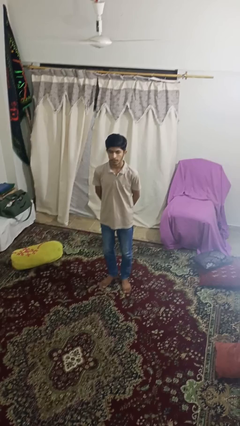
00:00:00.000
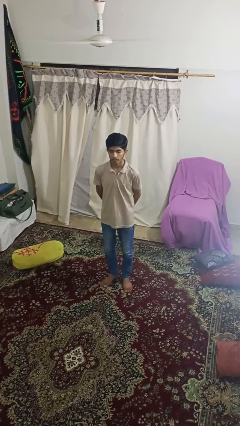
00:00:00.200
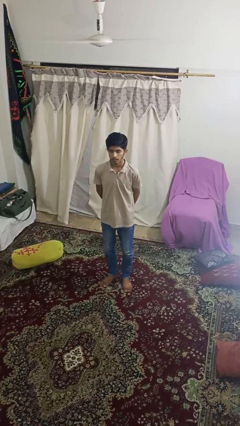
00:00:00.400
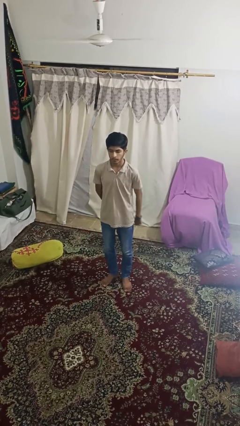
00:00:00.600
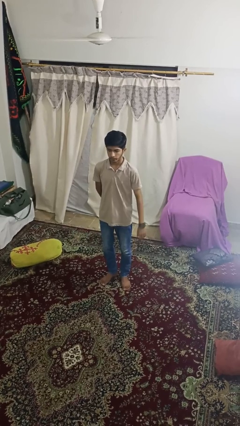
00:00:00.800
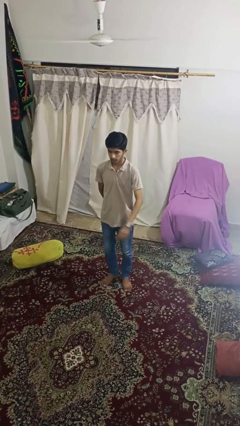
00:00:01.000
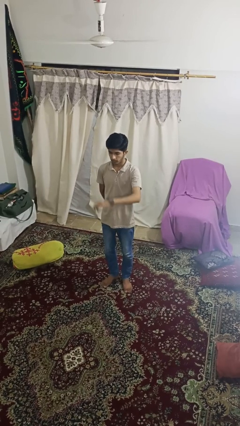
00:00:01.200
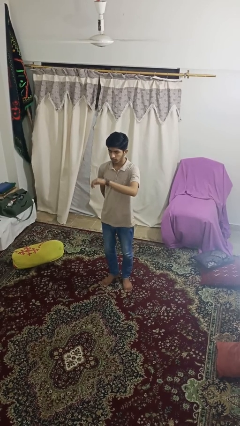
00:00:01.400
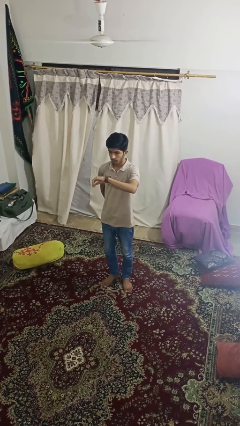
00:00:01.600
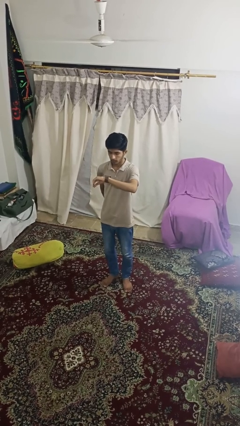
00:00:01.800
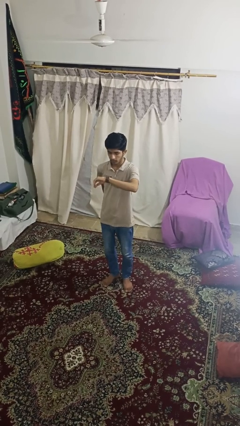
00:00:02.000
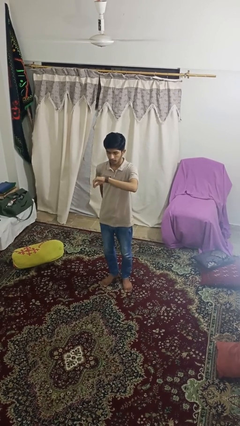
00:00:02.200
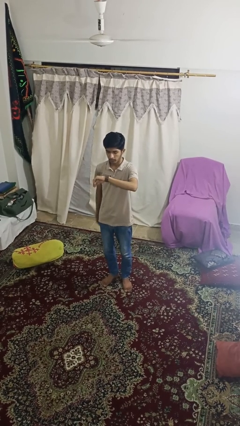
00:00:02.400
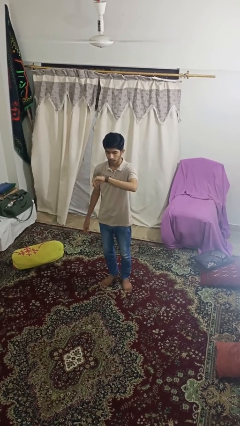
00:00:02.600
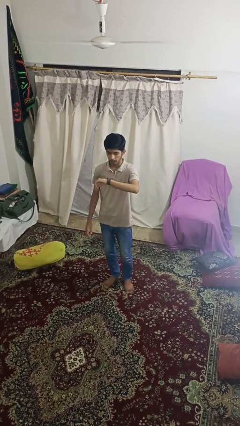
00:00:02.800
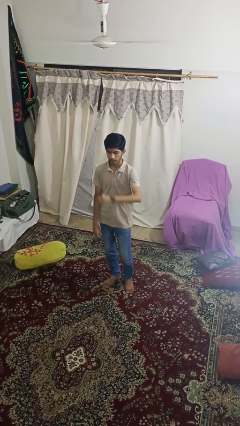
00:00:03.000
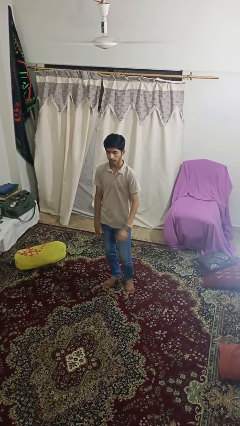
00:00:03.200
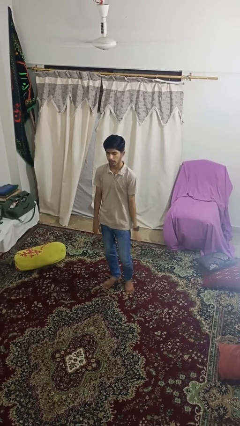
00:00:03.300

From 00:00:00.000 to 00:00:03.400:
person looks at wristwatch

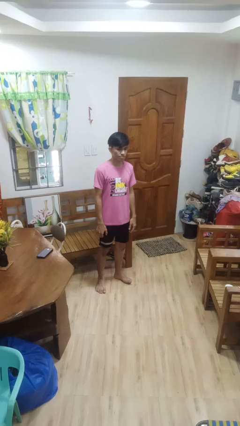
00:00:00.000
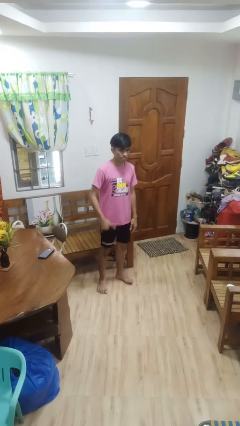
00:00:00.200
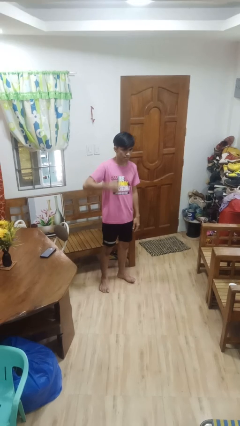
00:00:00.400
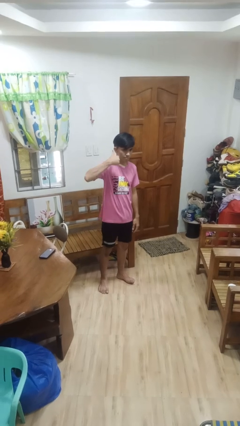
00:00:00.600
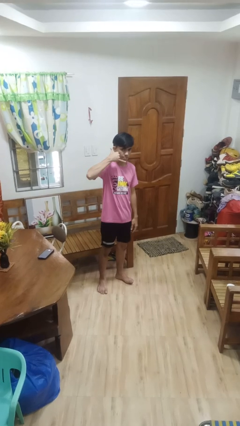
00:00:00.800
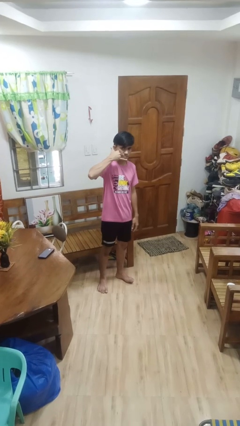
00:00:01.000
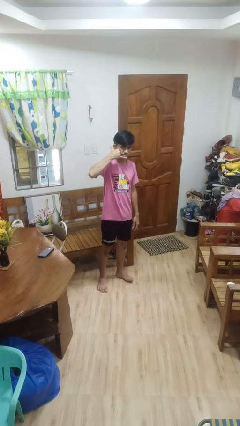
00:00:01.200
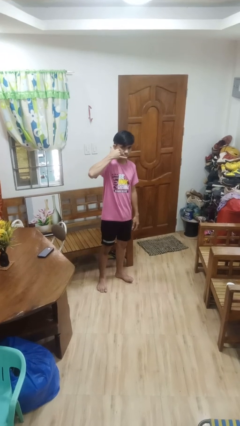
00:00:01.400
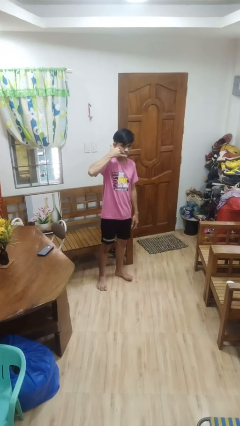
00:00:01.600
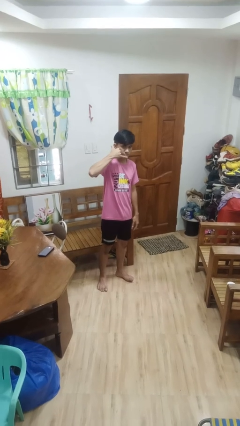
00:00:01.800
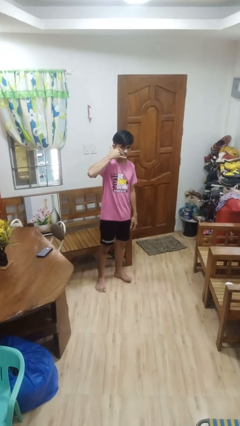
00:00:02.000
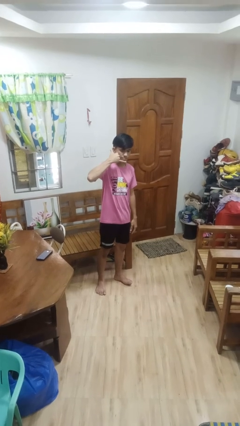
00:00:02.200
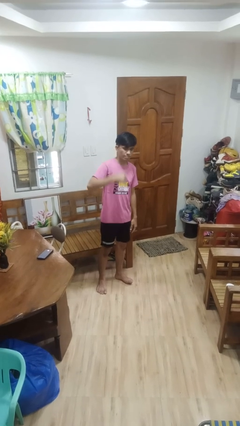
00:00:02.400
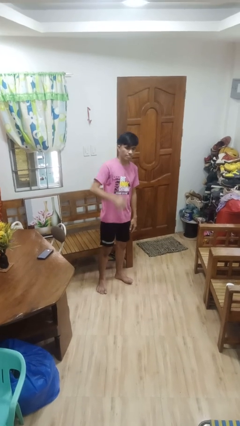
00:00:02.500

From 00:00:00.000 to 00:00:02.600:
person gestures call me

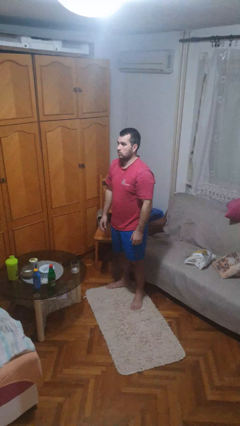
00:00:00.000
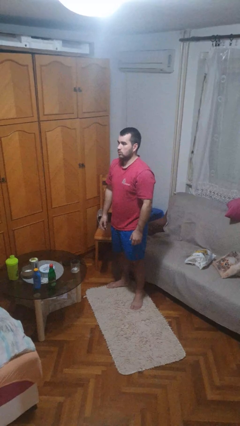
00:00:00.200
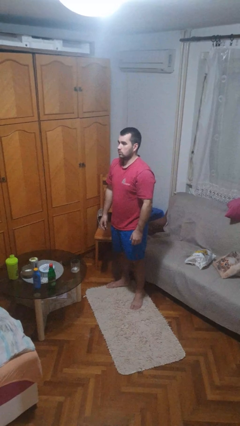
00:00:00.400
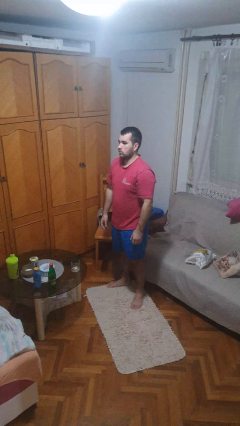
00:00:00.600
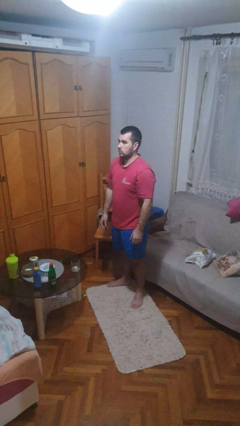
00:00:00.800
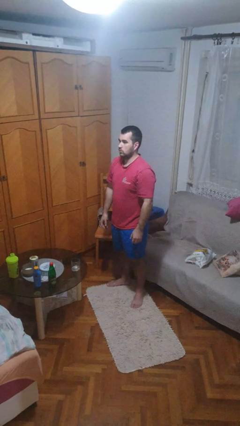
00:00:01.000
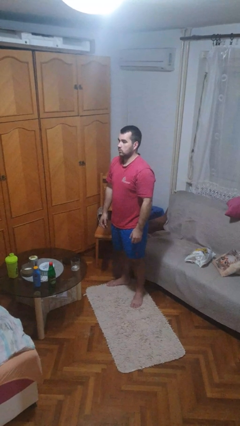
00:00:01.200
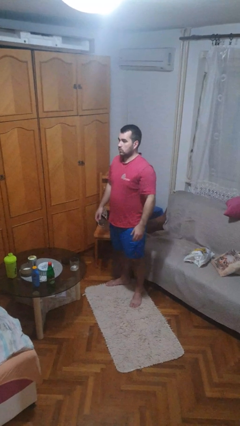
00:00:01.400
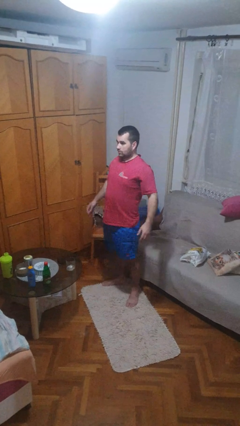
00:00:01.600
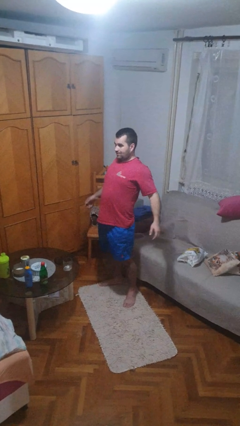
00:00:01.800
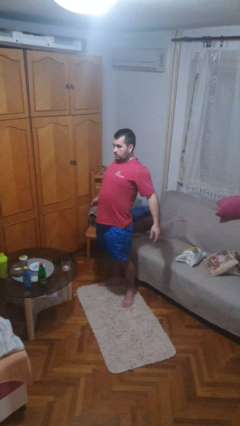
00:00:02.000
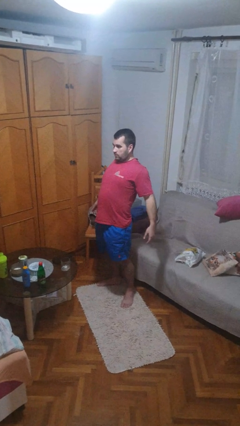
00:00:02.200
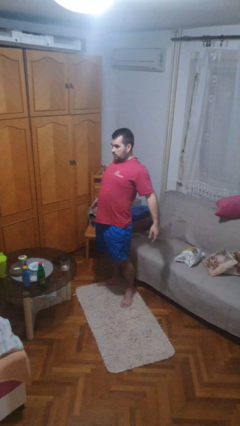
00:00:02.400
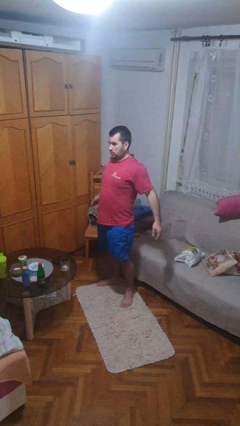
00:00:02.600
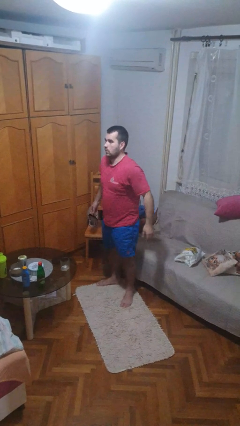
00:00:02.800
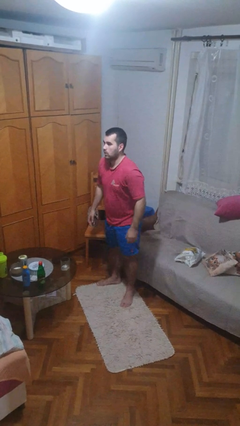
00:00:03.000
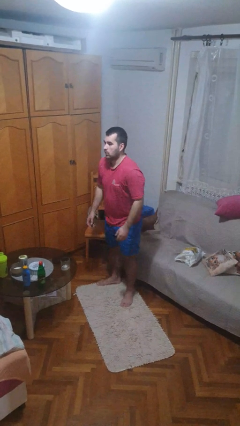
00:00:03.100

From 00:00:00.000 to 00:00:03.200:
person stretches back

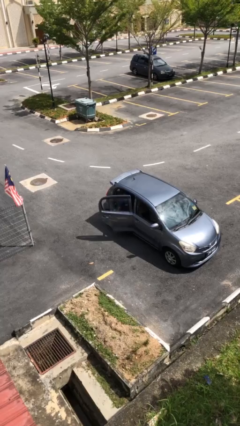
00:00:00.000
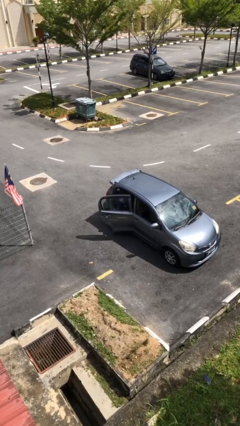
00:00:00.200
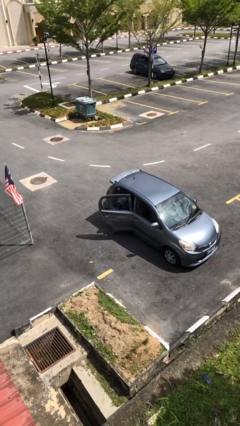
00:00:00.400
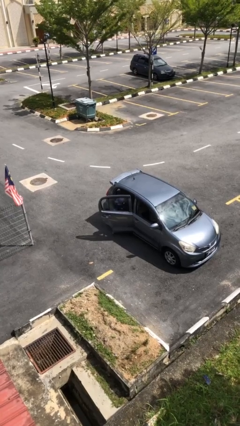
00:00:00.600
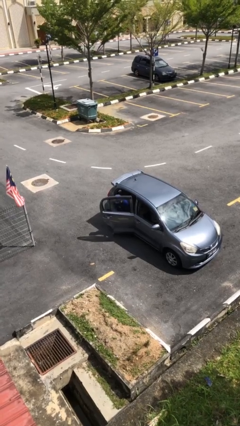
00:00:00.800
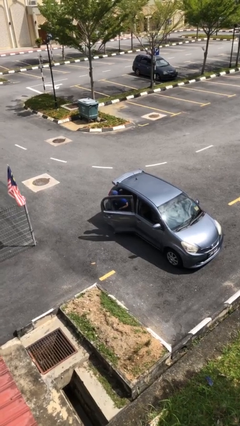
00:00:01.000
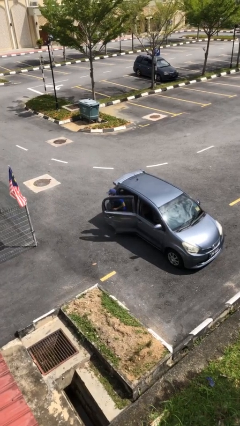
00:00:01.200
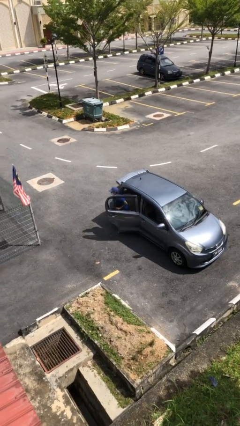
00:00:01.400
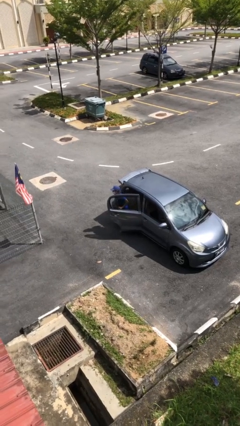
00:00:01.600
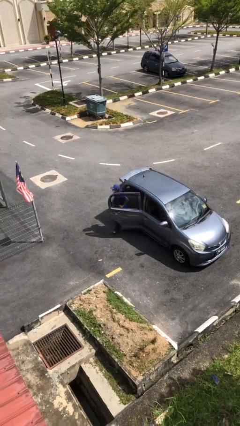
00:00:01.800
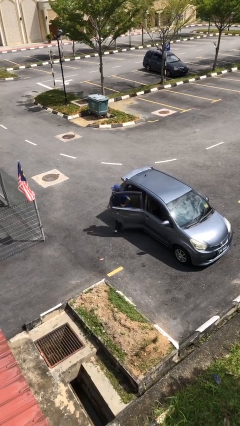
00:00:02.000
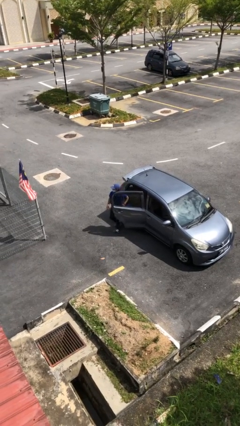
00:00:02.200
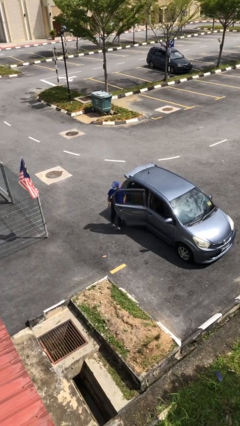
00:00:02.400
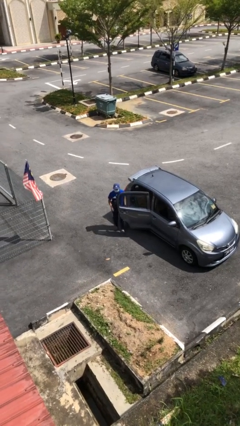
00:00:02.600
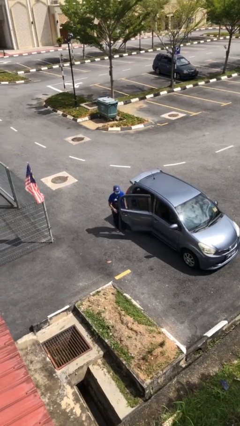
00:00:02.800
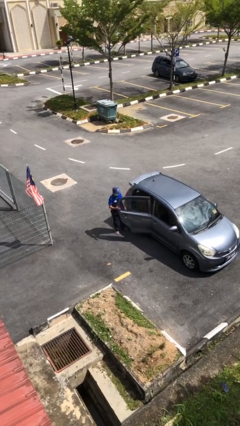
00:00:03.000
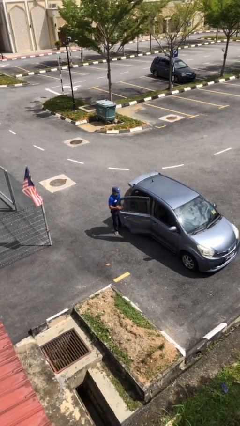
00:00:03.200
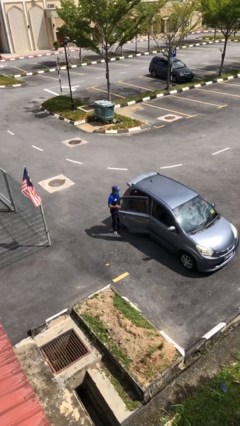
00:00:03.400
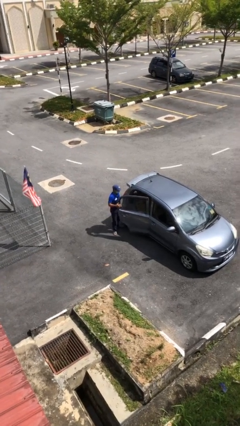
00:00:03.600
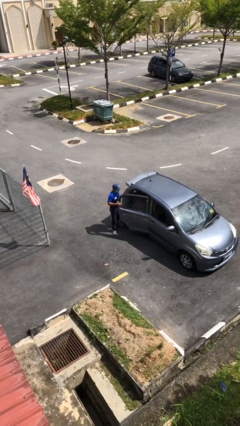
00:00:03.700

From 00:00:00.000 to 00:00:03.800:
person exits car

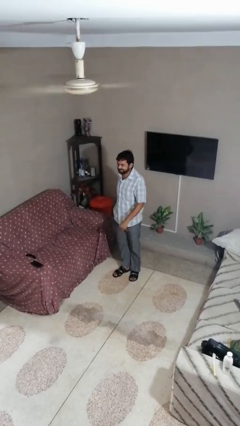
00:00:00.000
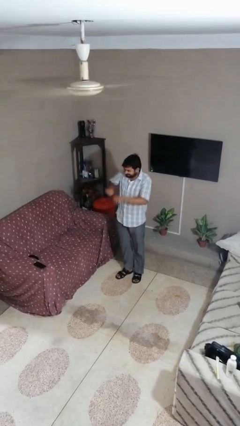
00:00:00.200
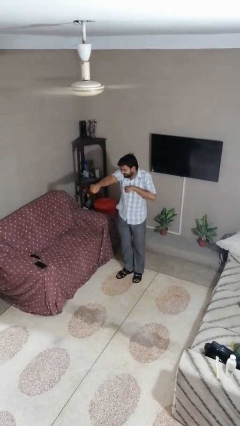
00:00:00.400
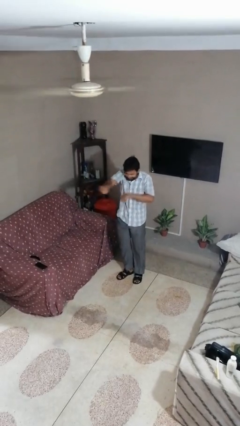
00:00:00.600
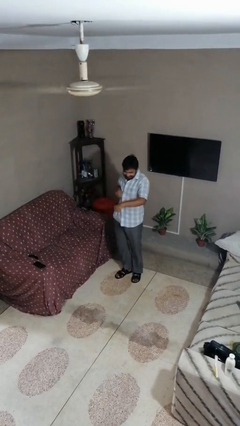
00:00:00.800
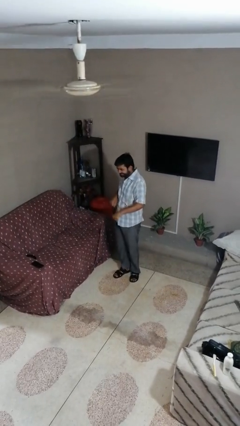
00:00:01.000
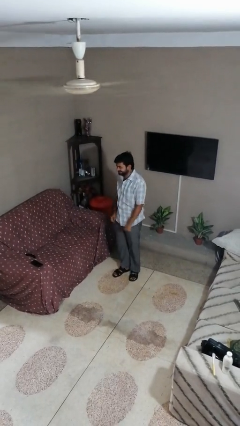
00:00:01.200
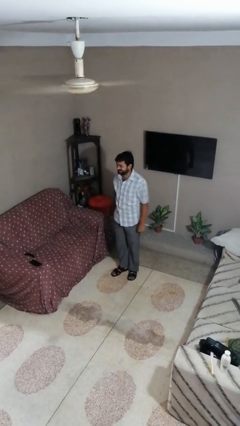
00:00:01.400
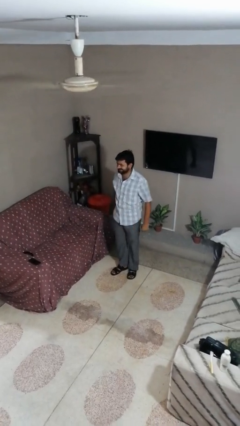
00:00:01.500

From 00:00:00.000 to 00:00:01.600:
person karate chop

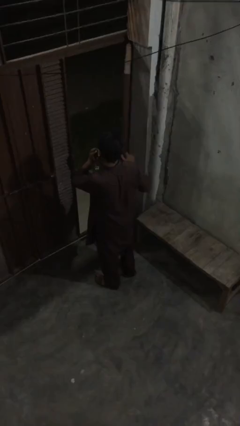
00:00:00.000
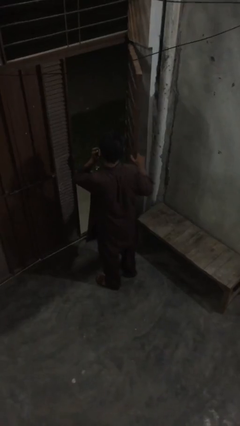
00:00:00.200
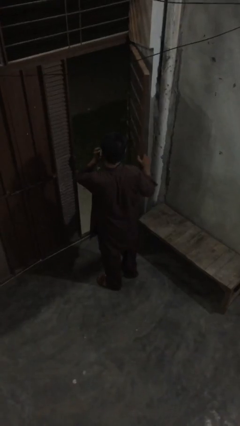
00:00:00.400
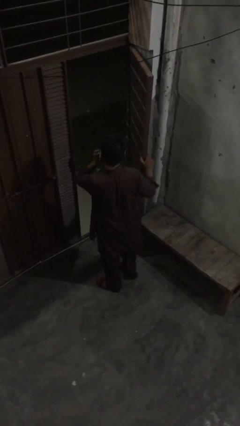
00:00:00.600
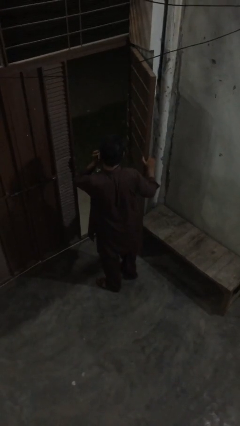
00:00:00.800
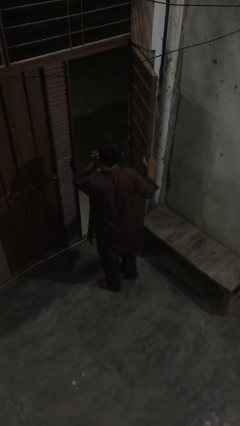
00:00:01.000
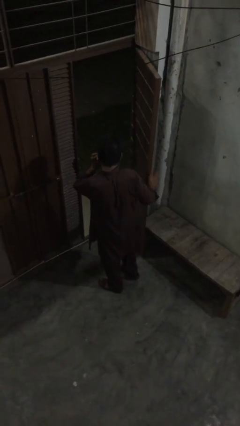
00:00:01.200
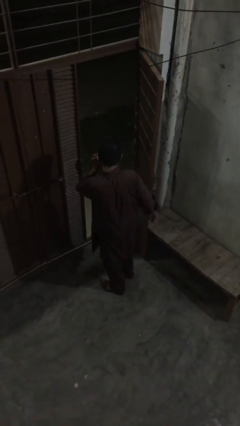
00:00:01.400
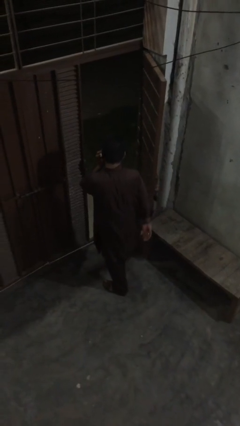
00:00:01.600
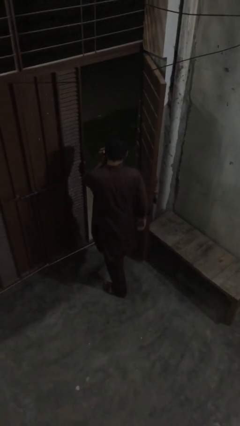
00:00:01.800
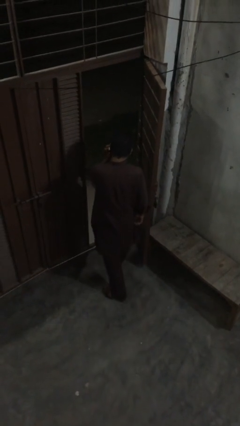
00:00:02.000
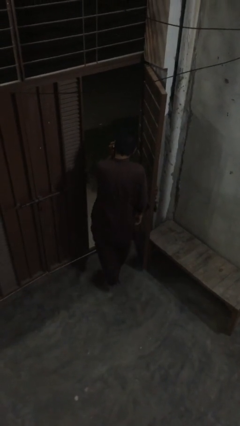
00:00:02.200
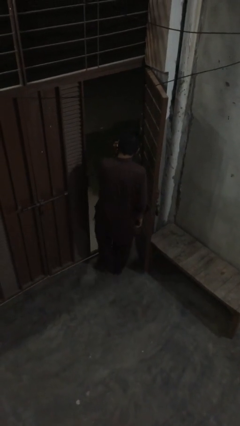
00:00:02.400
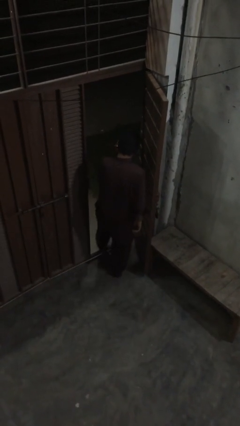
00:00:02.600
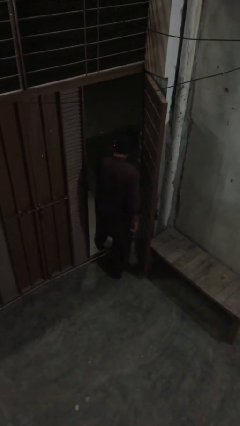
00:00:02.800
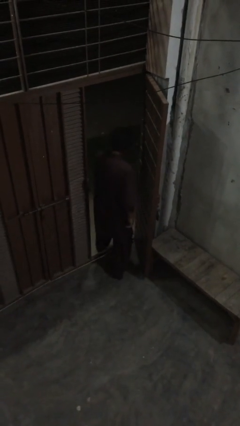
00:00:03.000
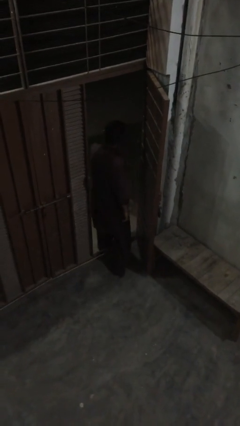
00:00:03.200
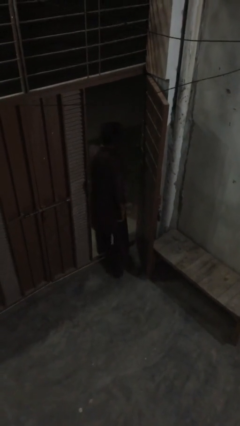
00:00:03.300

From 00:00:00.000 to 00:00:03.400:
person exits scene through structure
